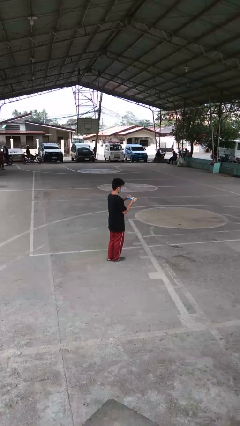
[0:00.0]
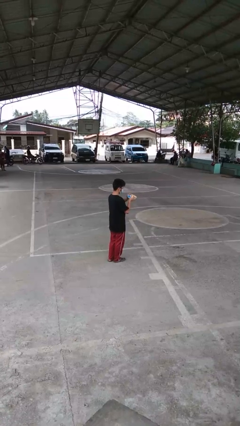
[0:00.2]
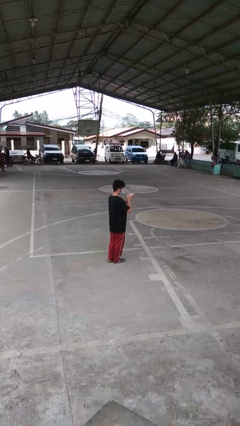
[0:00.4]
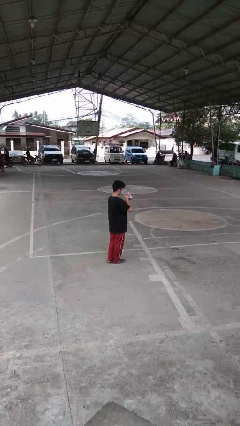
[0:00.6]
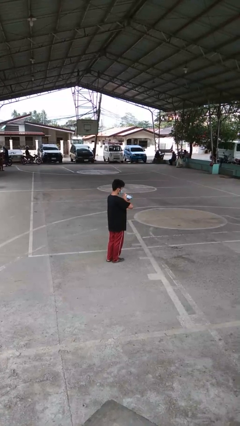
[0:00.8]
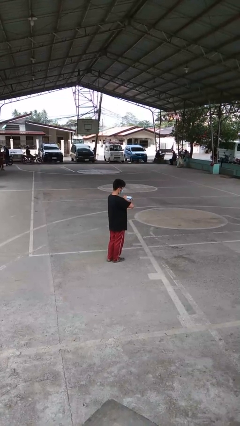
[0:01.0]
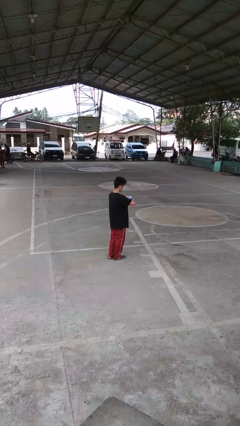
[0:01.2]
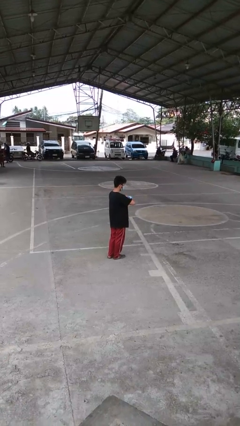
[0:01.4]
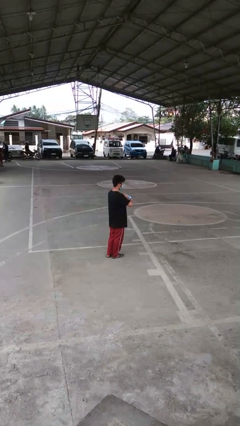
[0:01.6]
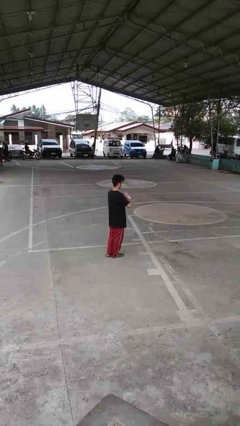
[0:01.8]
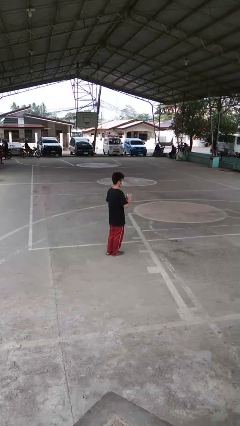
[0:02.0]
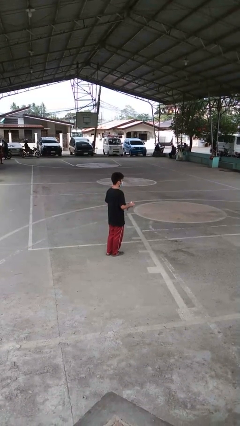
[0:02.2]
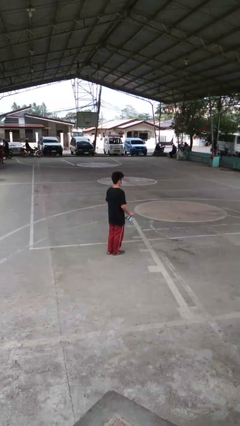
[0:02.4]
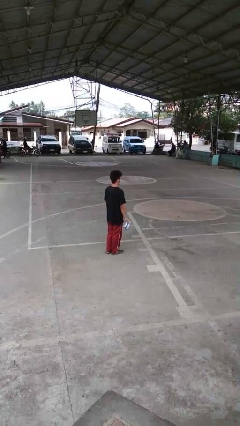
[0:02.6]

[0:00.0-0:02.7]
person squeezes object

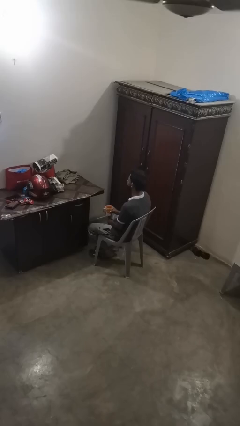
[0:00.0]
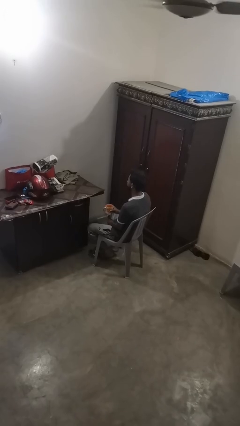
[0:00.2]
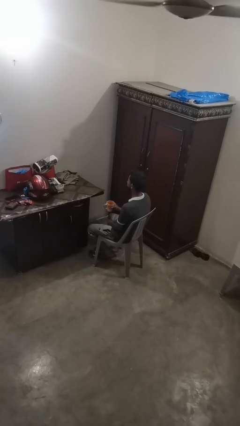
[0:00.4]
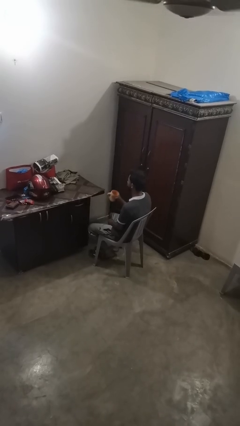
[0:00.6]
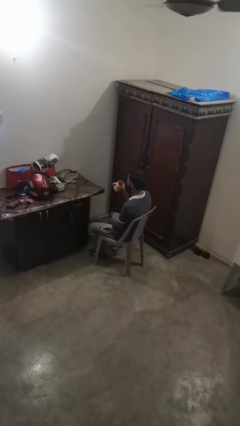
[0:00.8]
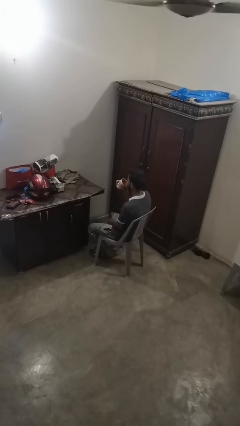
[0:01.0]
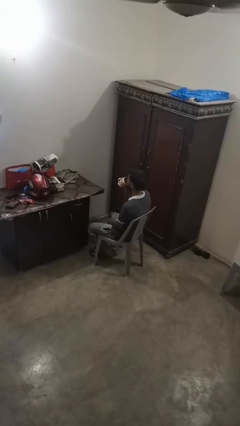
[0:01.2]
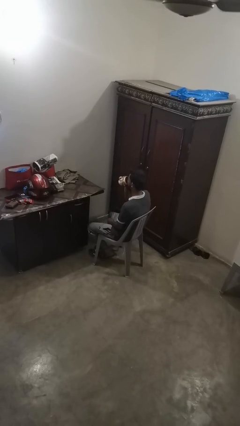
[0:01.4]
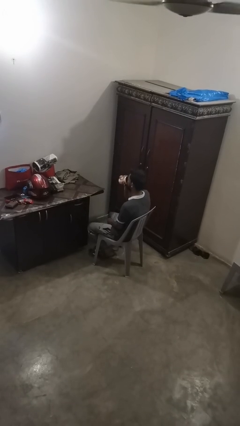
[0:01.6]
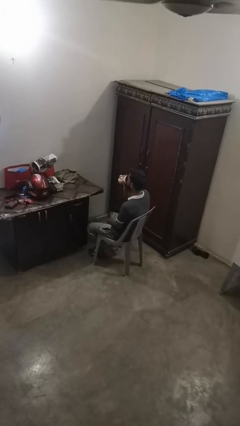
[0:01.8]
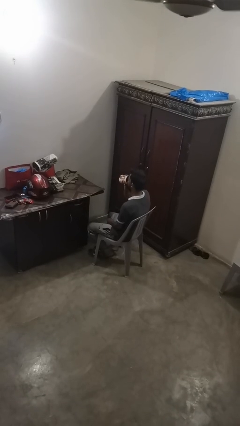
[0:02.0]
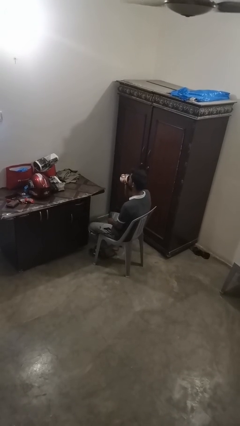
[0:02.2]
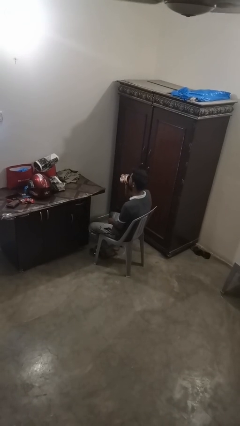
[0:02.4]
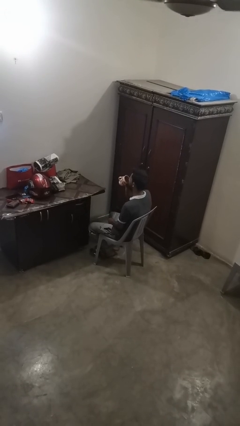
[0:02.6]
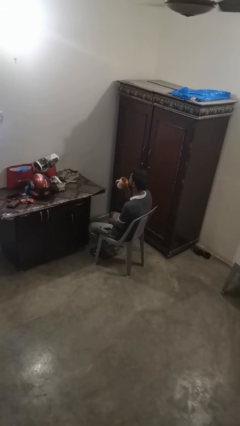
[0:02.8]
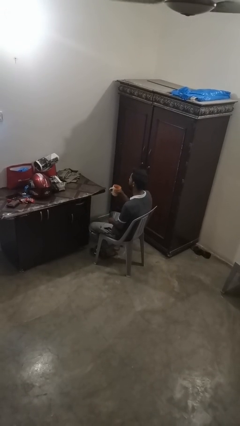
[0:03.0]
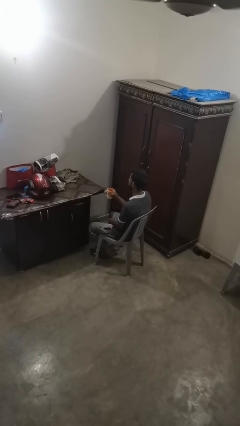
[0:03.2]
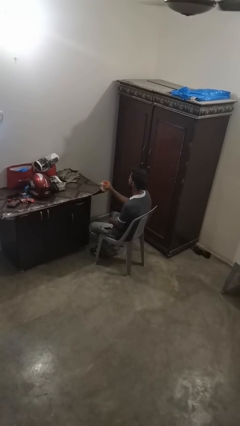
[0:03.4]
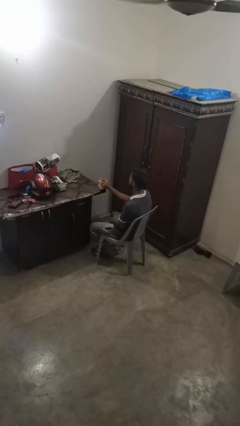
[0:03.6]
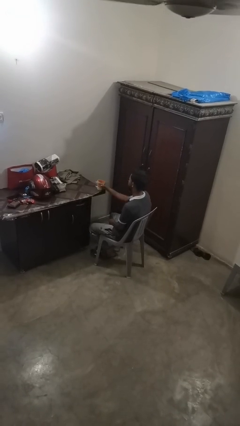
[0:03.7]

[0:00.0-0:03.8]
person drinks from mug

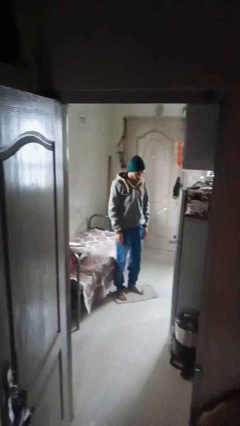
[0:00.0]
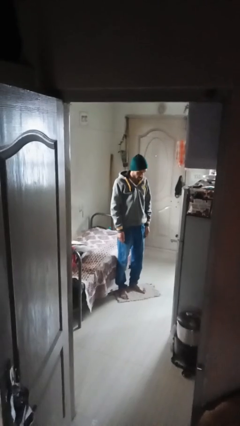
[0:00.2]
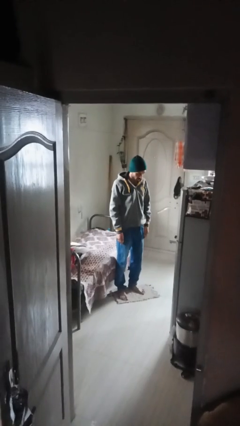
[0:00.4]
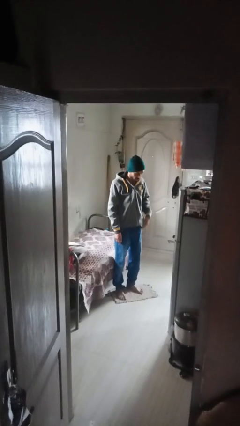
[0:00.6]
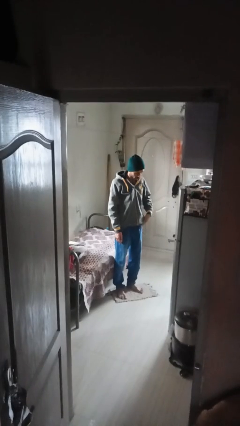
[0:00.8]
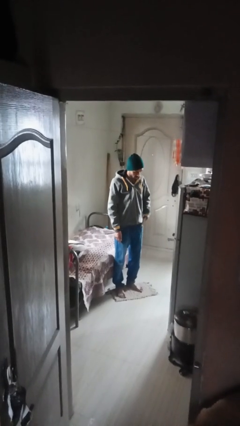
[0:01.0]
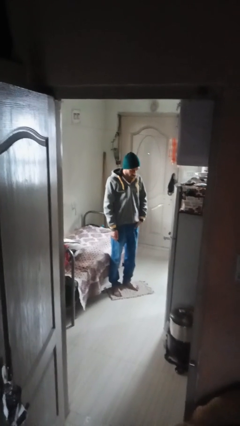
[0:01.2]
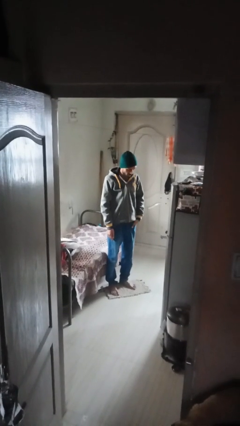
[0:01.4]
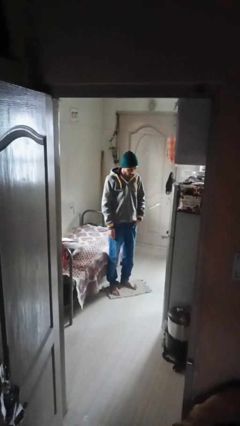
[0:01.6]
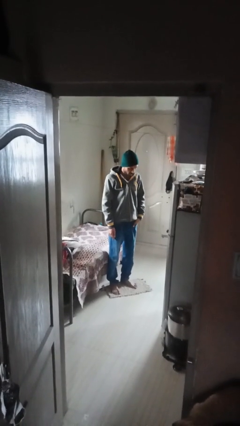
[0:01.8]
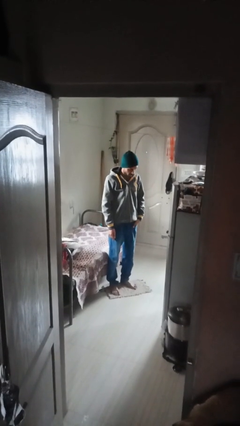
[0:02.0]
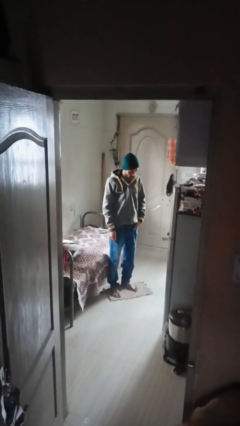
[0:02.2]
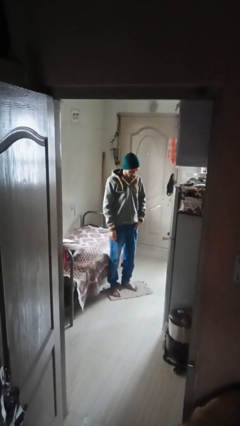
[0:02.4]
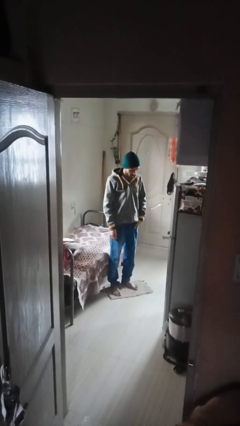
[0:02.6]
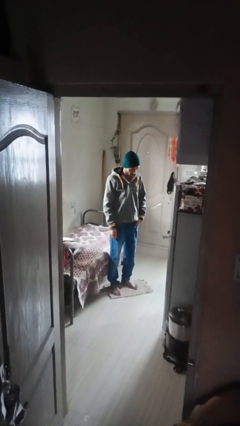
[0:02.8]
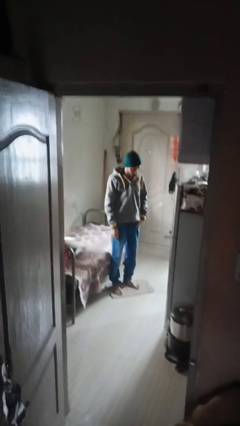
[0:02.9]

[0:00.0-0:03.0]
person puts hands in back pockets

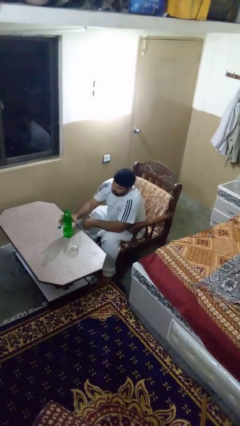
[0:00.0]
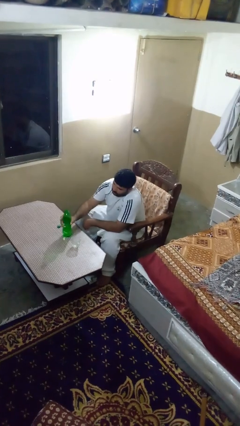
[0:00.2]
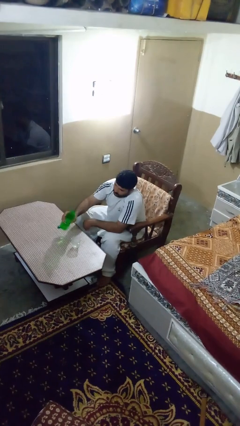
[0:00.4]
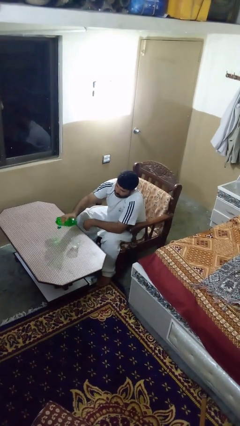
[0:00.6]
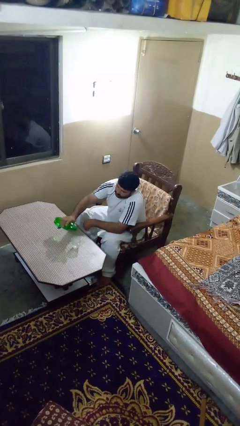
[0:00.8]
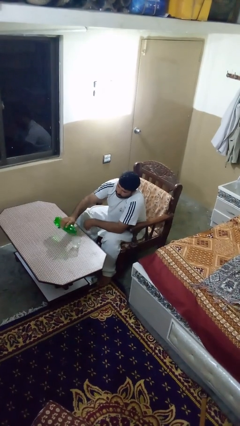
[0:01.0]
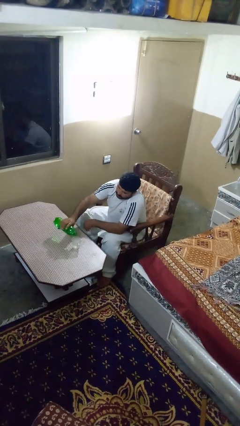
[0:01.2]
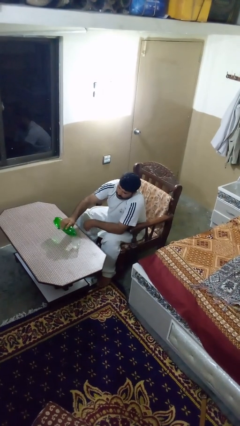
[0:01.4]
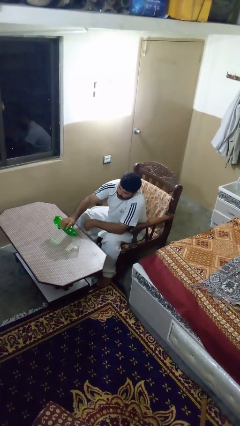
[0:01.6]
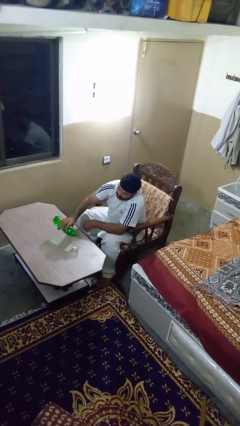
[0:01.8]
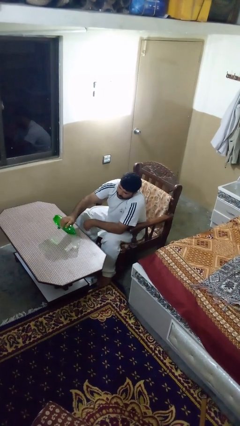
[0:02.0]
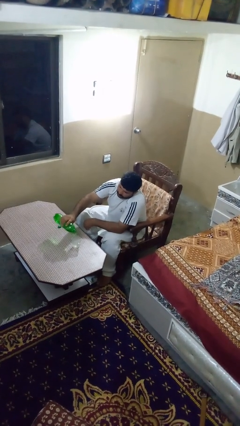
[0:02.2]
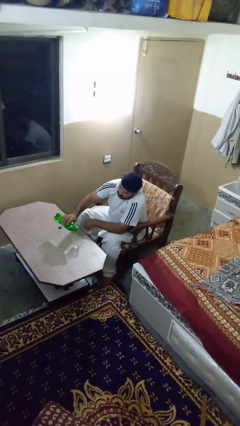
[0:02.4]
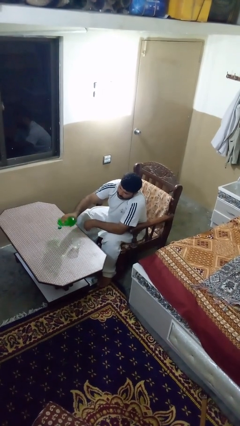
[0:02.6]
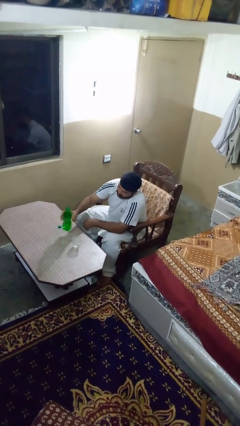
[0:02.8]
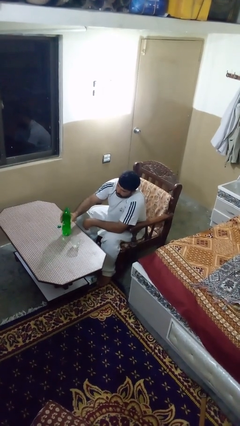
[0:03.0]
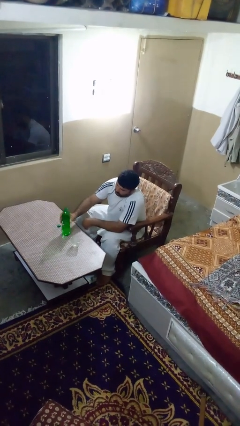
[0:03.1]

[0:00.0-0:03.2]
person pours liquid into cup

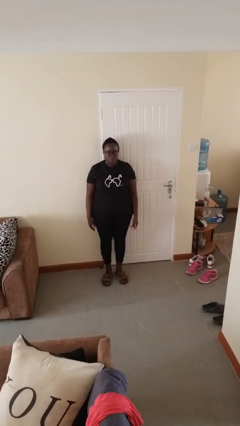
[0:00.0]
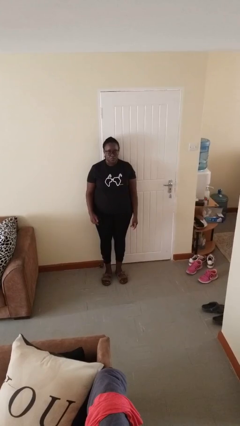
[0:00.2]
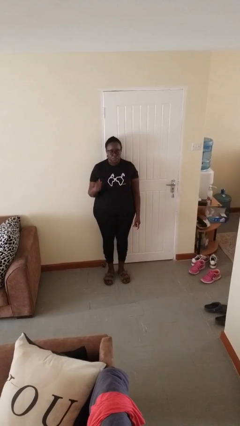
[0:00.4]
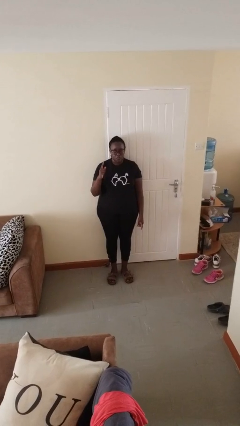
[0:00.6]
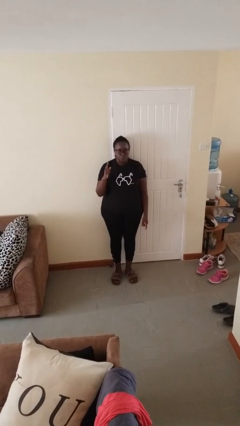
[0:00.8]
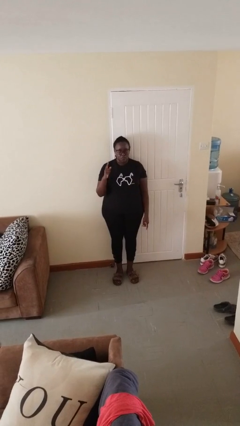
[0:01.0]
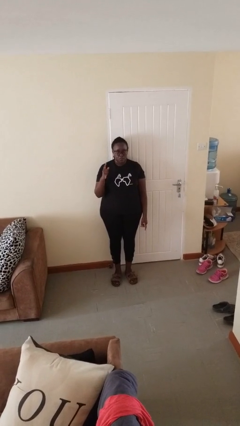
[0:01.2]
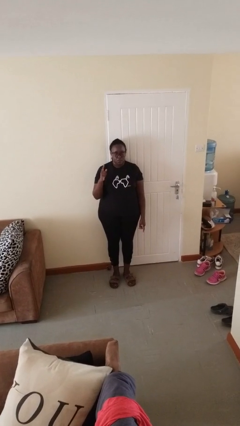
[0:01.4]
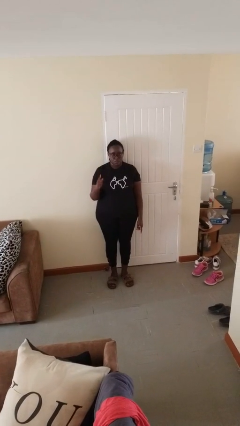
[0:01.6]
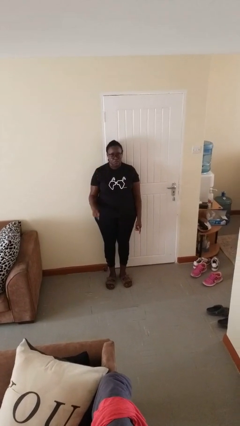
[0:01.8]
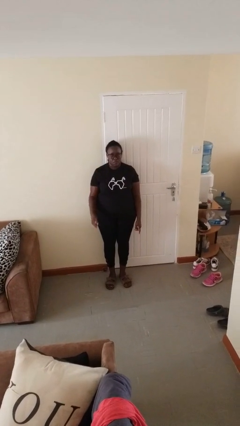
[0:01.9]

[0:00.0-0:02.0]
person gestures number one

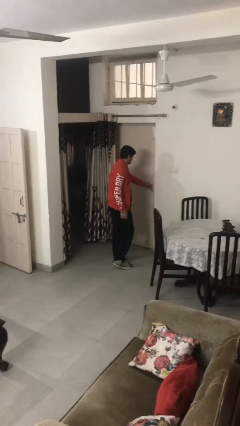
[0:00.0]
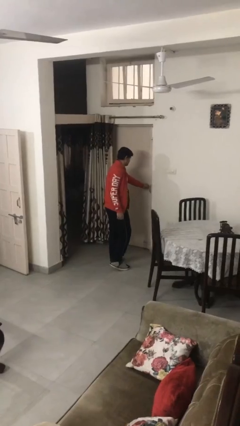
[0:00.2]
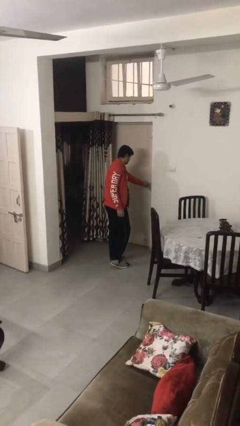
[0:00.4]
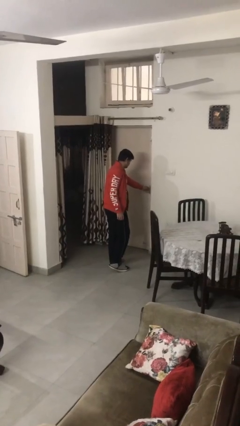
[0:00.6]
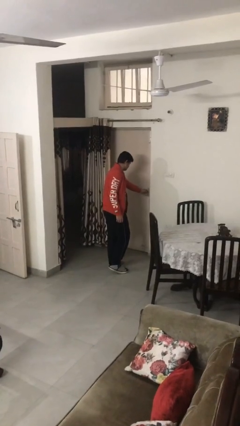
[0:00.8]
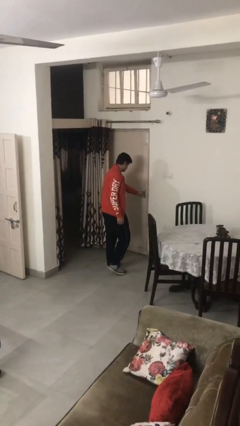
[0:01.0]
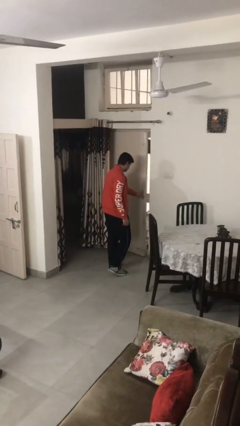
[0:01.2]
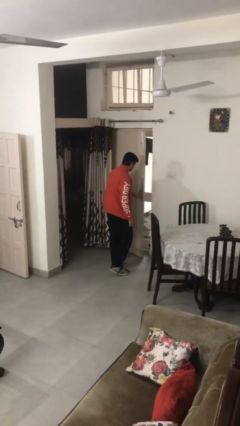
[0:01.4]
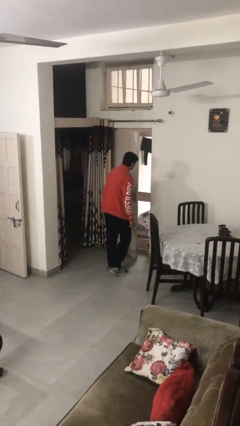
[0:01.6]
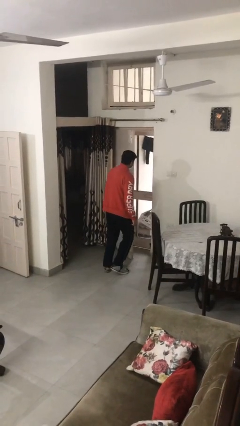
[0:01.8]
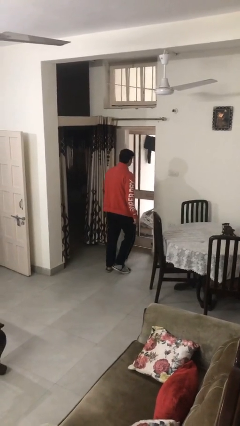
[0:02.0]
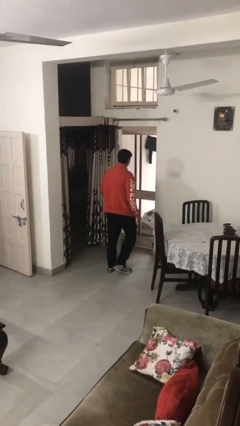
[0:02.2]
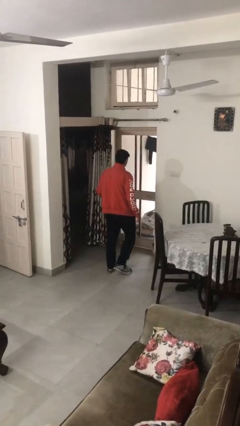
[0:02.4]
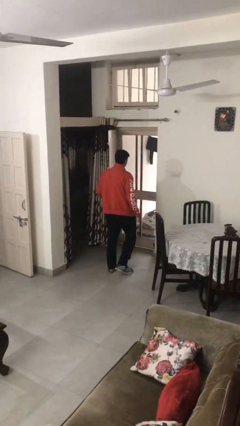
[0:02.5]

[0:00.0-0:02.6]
person opens facility door

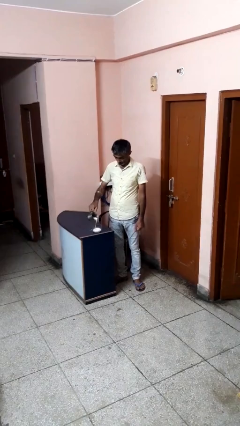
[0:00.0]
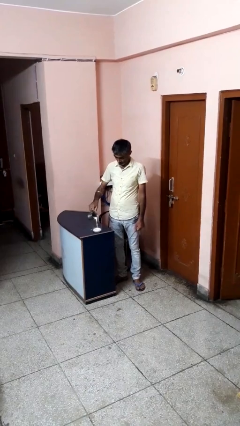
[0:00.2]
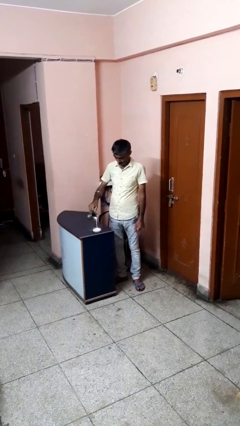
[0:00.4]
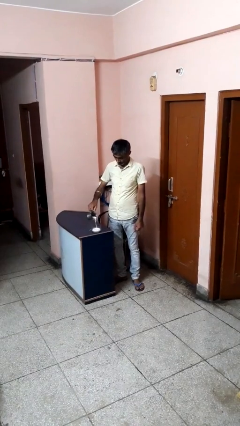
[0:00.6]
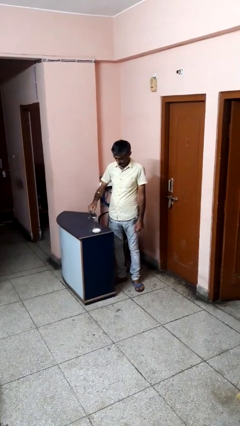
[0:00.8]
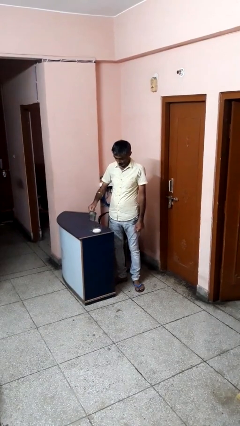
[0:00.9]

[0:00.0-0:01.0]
person pours into bowl
